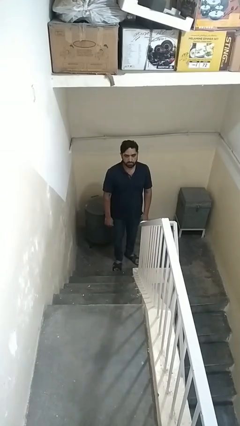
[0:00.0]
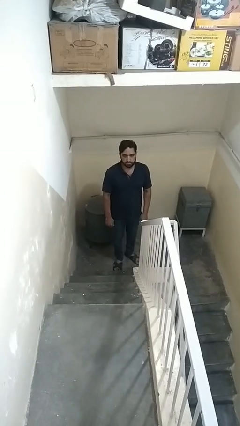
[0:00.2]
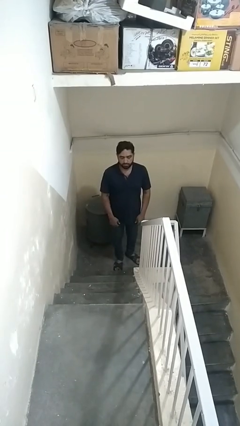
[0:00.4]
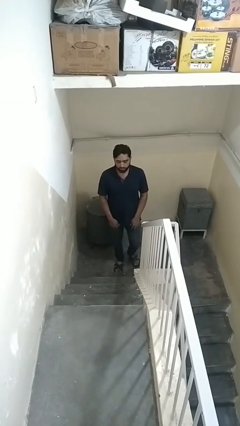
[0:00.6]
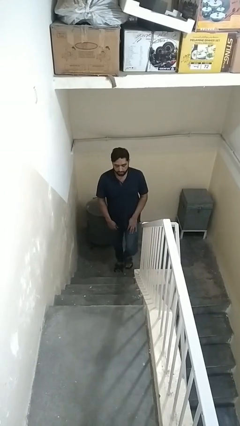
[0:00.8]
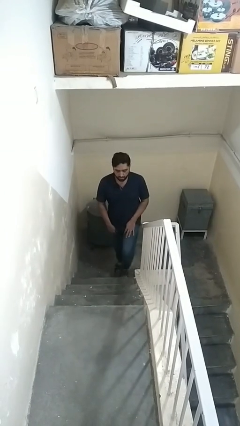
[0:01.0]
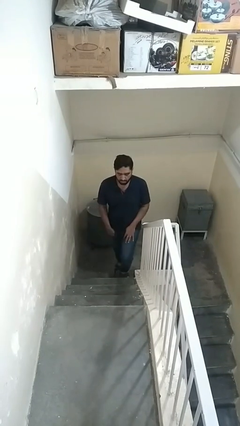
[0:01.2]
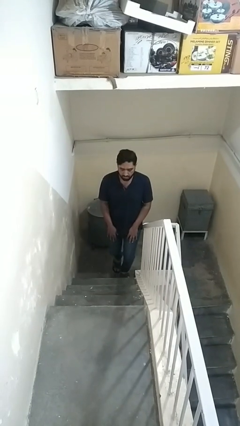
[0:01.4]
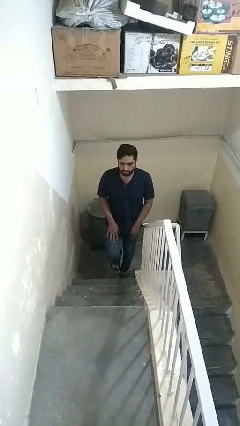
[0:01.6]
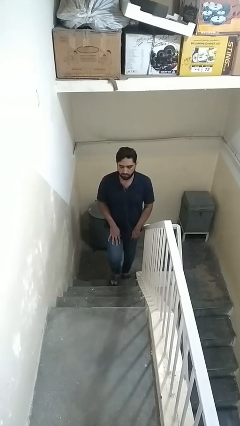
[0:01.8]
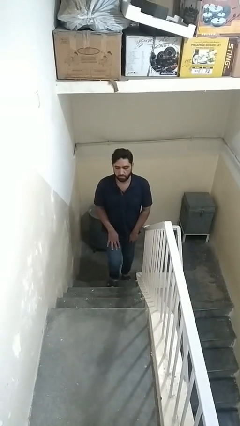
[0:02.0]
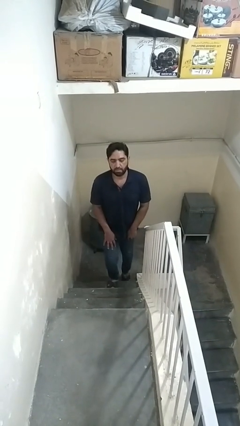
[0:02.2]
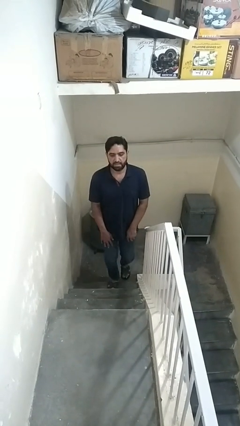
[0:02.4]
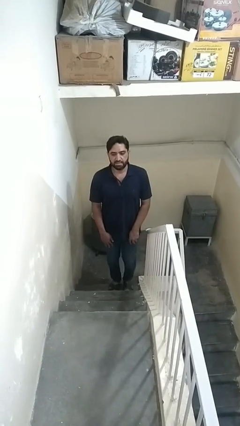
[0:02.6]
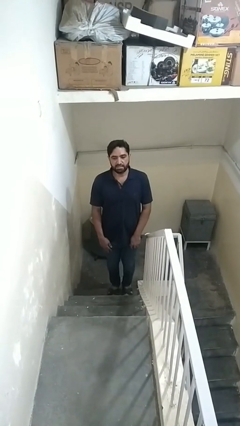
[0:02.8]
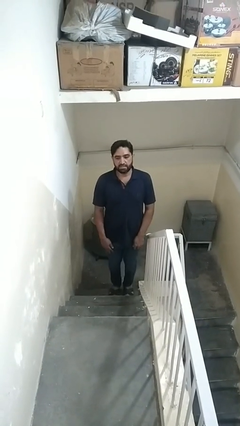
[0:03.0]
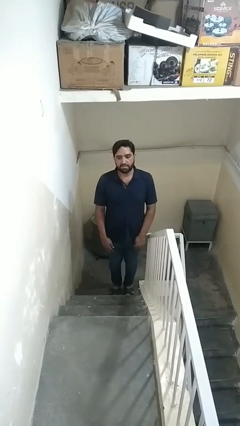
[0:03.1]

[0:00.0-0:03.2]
person climbs up stairs

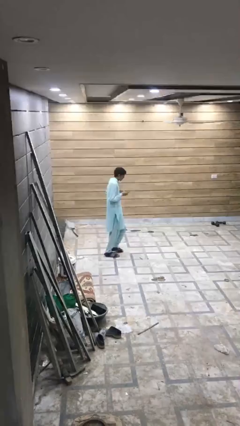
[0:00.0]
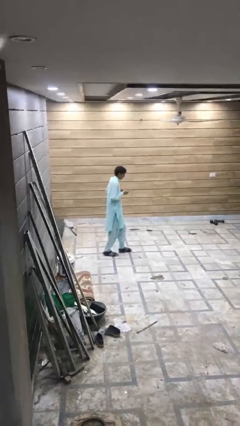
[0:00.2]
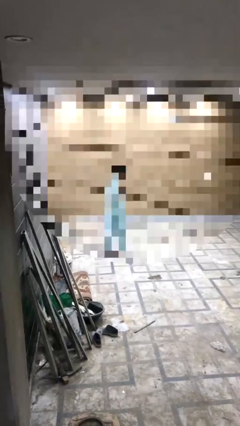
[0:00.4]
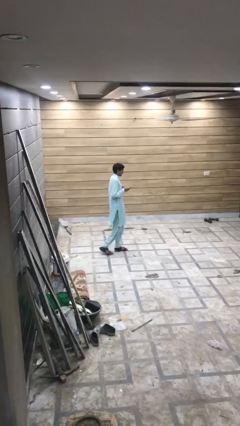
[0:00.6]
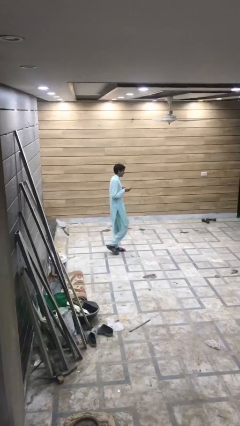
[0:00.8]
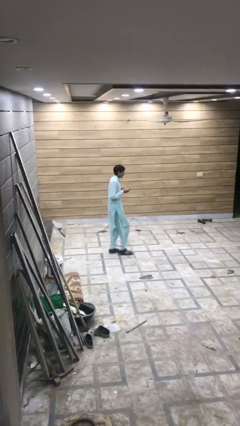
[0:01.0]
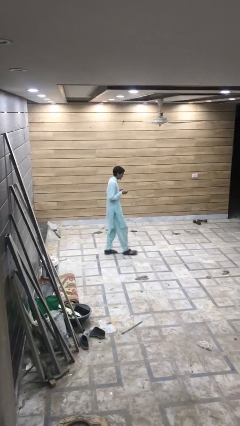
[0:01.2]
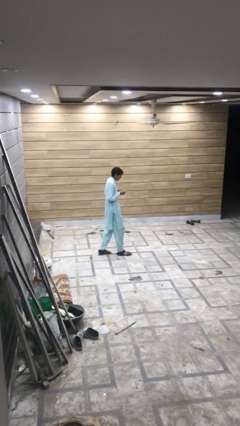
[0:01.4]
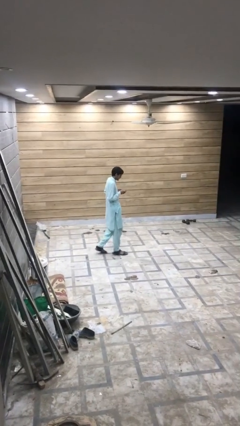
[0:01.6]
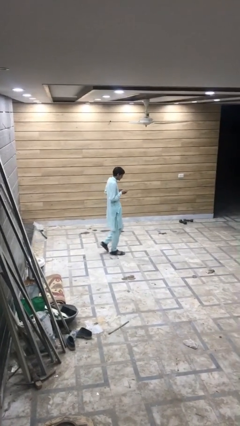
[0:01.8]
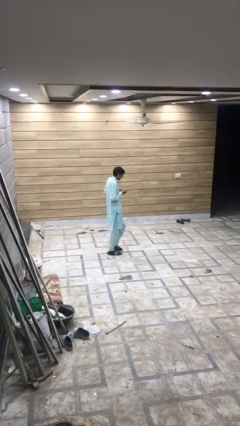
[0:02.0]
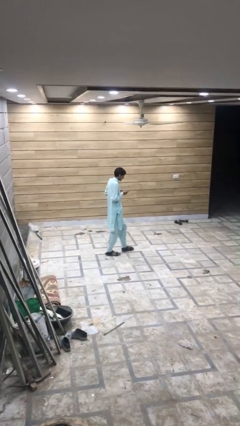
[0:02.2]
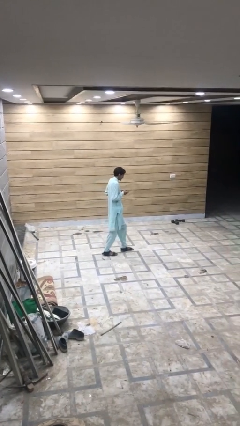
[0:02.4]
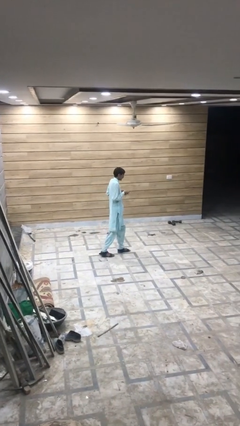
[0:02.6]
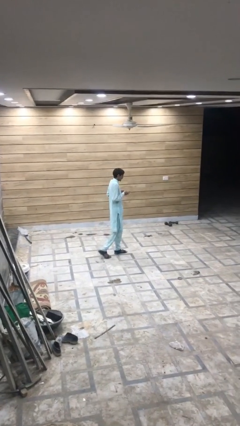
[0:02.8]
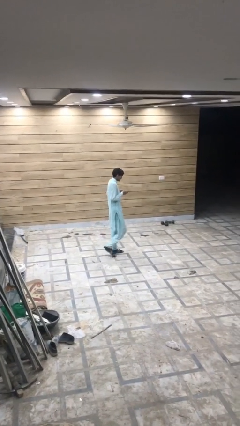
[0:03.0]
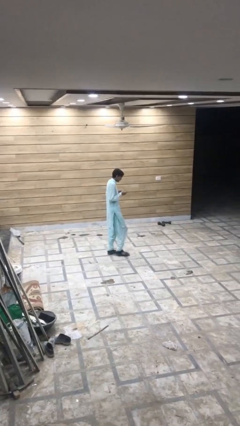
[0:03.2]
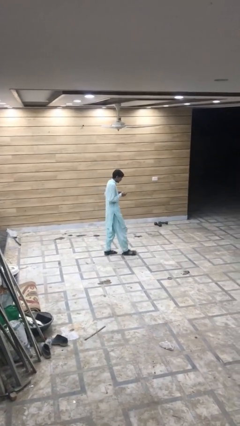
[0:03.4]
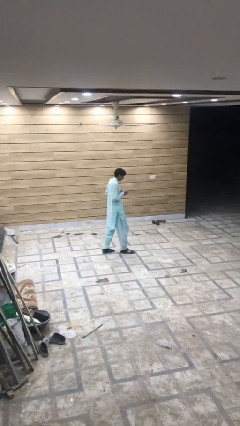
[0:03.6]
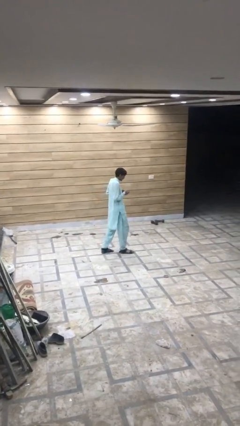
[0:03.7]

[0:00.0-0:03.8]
person texts on phone

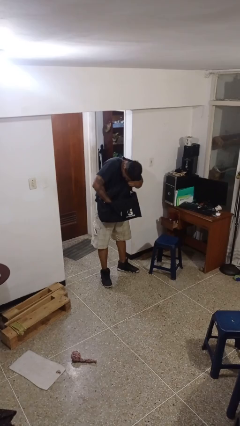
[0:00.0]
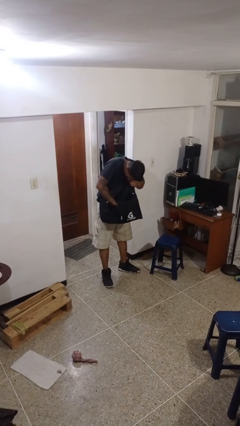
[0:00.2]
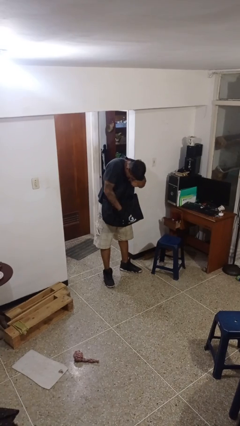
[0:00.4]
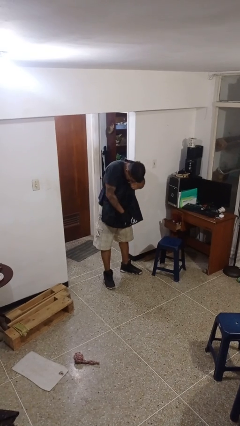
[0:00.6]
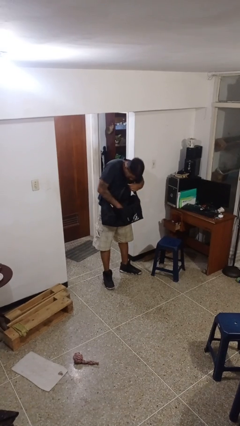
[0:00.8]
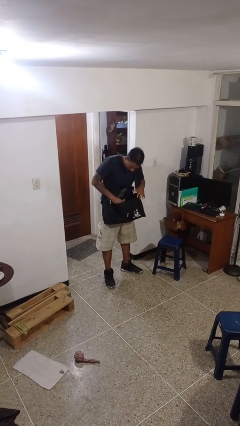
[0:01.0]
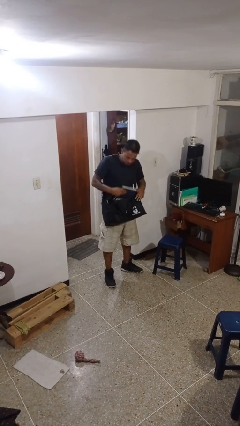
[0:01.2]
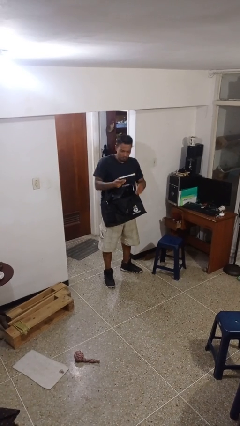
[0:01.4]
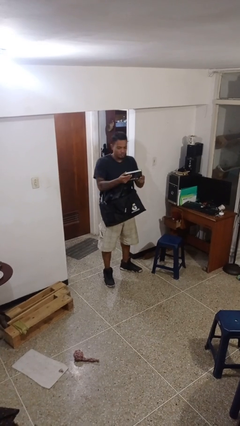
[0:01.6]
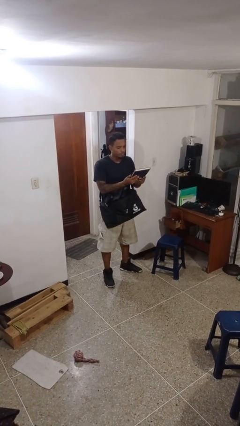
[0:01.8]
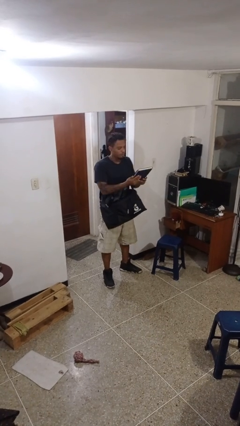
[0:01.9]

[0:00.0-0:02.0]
person takes object from purse

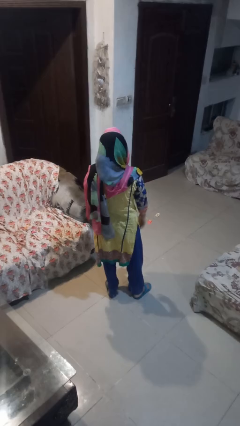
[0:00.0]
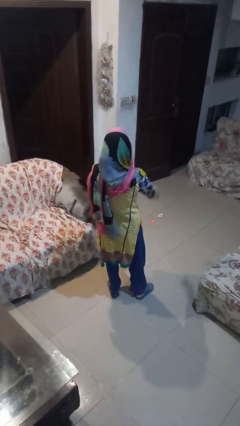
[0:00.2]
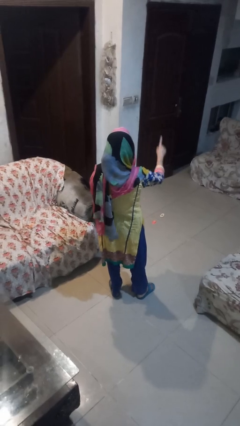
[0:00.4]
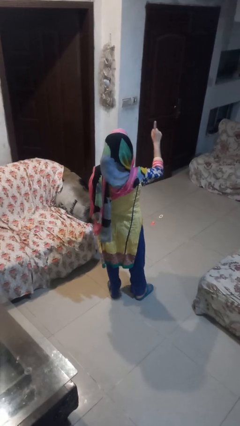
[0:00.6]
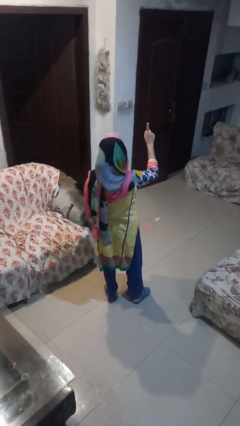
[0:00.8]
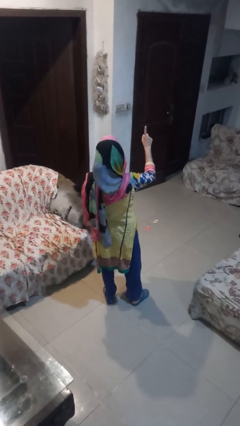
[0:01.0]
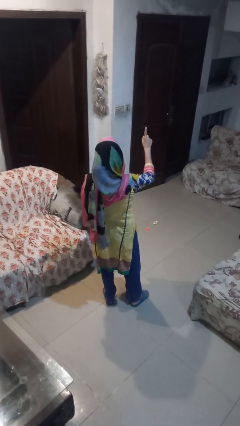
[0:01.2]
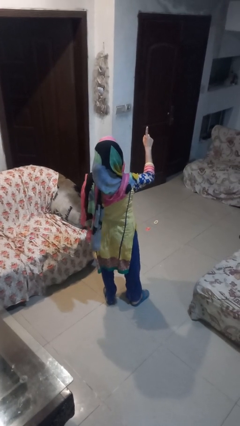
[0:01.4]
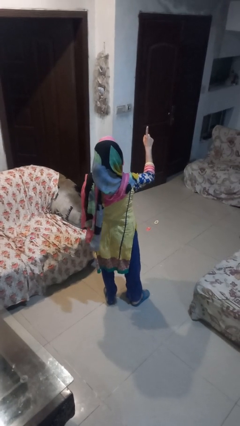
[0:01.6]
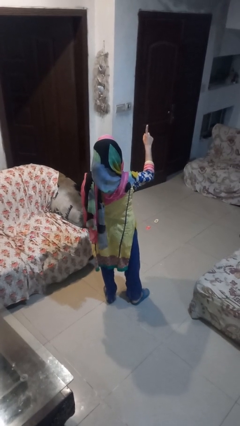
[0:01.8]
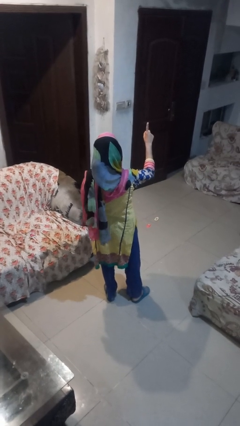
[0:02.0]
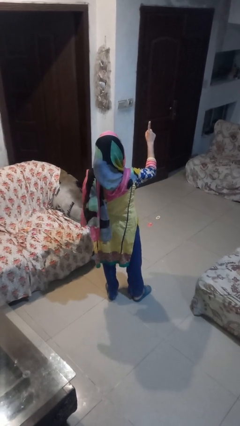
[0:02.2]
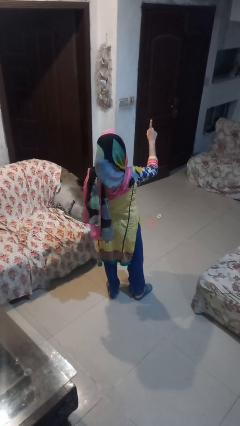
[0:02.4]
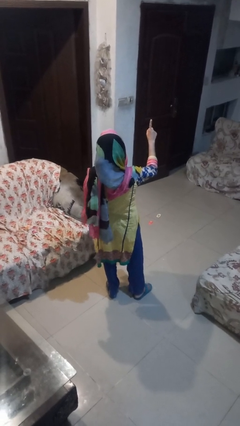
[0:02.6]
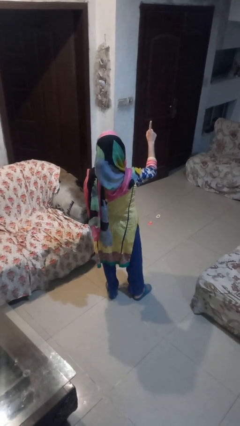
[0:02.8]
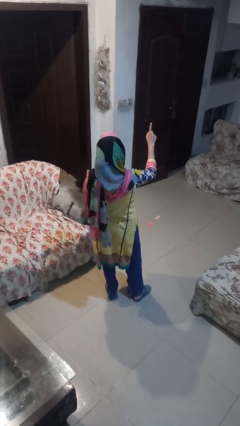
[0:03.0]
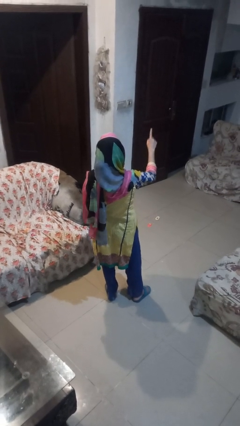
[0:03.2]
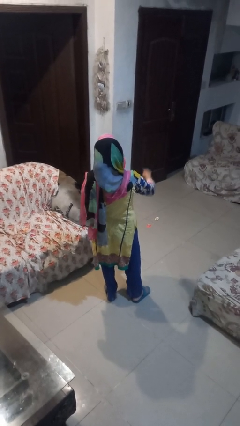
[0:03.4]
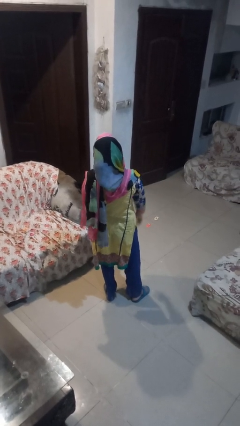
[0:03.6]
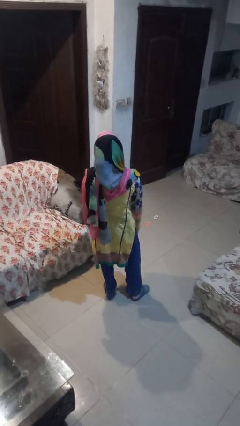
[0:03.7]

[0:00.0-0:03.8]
person gestures number one

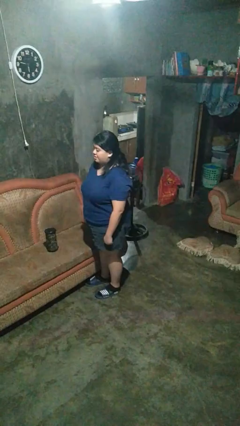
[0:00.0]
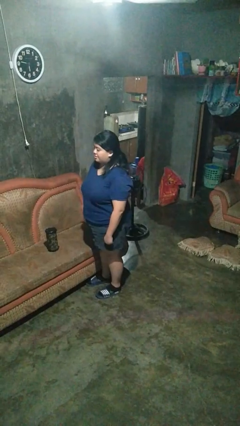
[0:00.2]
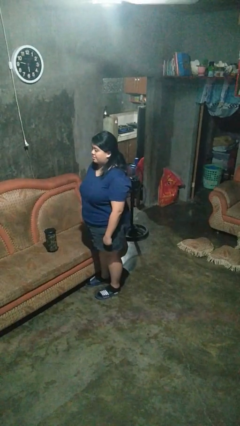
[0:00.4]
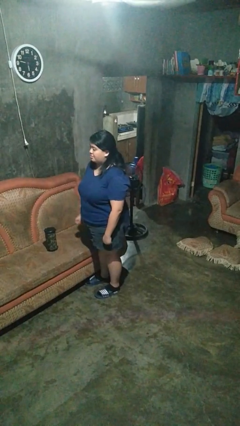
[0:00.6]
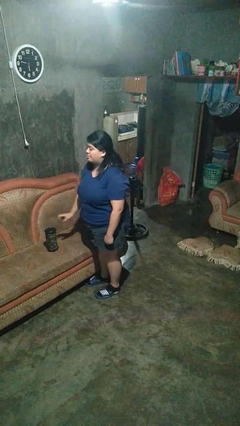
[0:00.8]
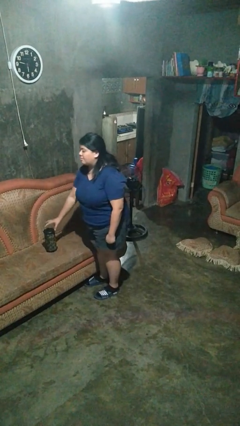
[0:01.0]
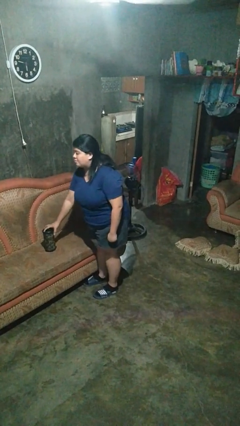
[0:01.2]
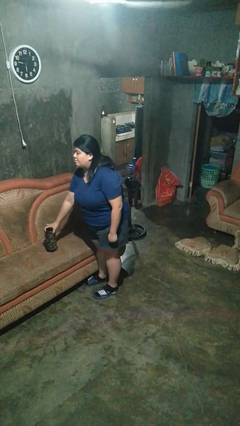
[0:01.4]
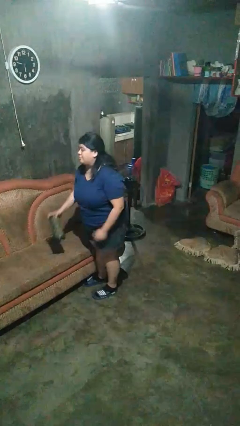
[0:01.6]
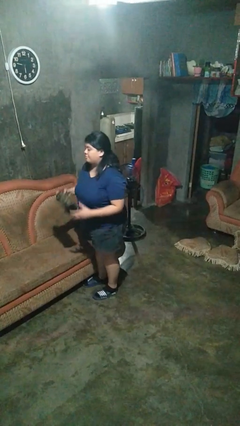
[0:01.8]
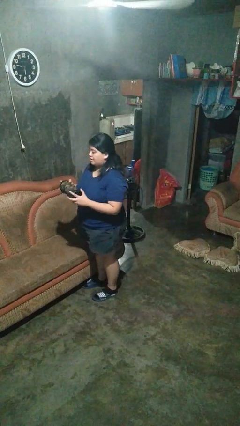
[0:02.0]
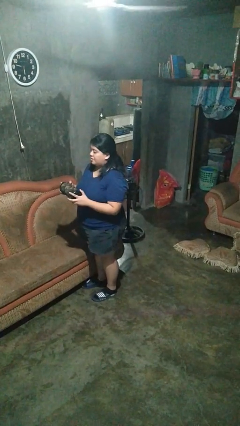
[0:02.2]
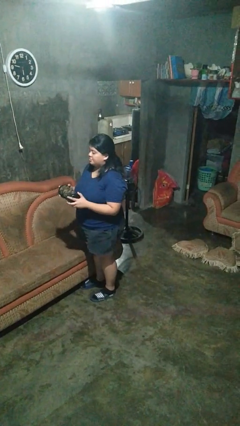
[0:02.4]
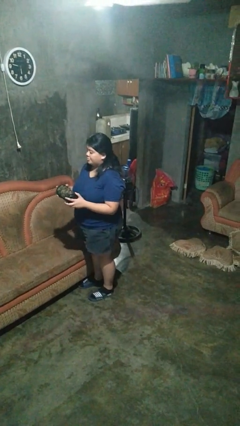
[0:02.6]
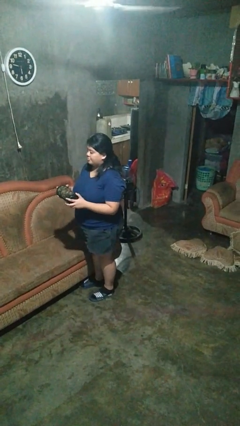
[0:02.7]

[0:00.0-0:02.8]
person picks up object from couch

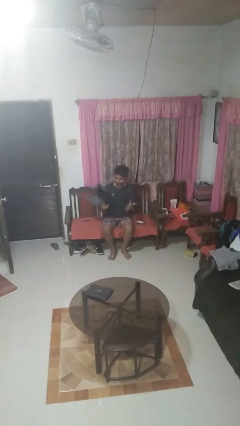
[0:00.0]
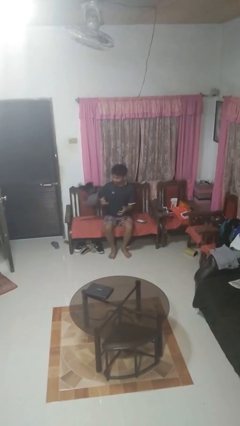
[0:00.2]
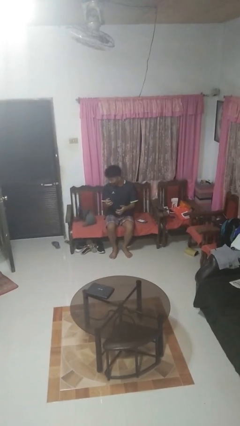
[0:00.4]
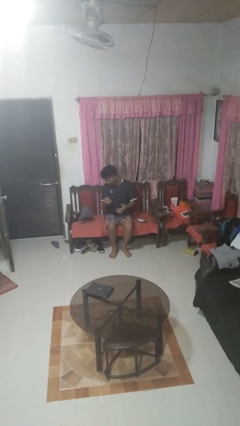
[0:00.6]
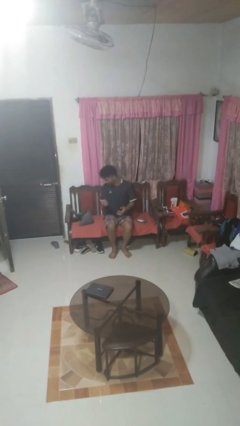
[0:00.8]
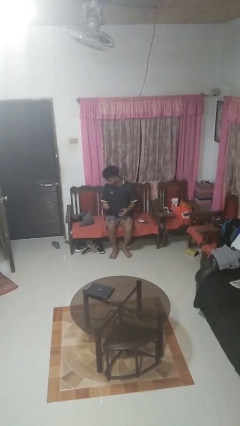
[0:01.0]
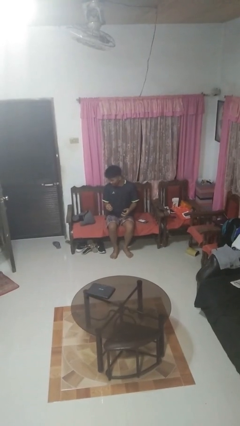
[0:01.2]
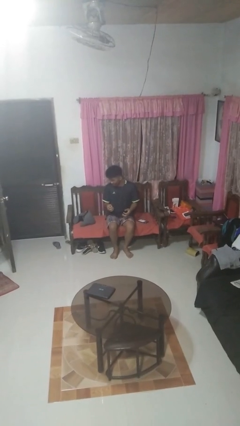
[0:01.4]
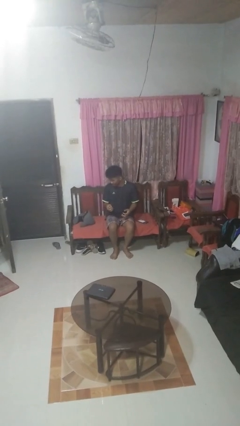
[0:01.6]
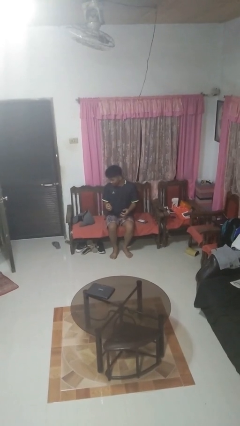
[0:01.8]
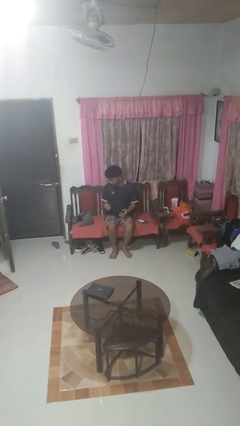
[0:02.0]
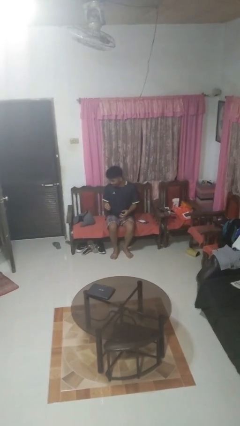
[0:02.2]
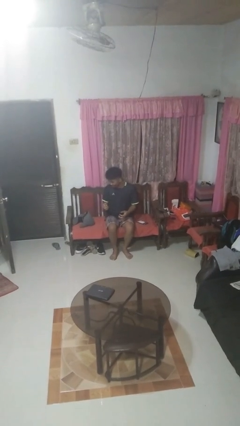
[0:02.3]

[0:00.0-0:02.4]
person drops object
